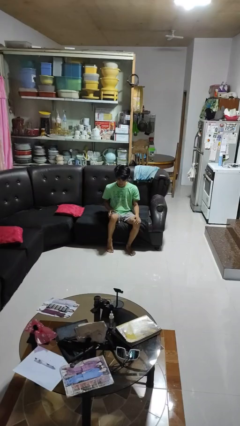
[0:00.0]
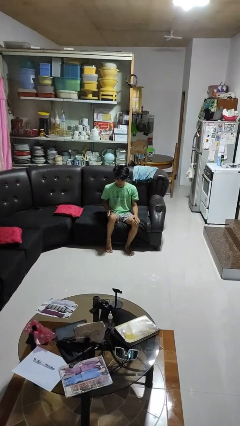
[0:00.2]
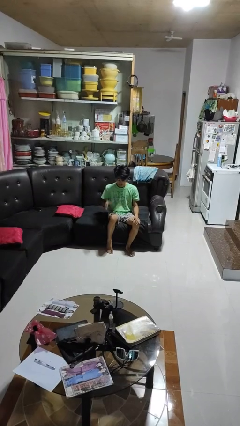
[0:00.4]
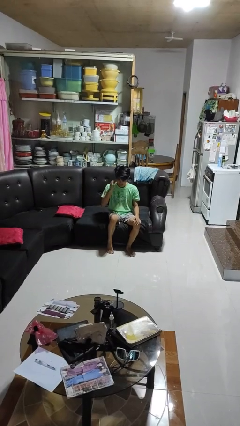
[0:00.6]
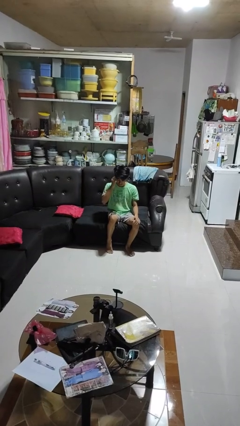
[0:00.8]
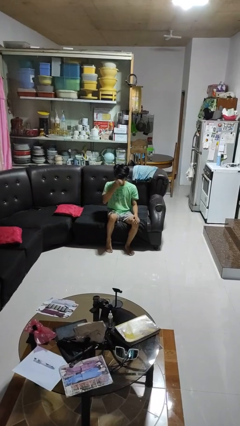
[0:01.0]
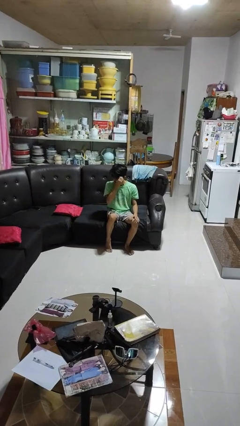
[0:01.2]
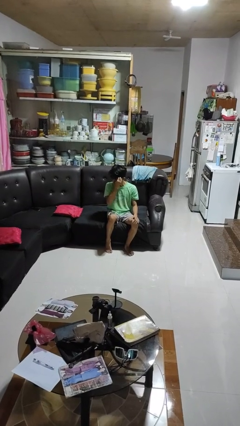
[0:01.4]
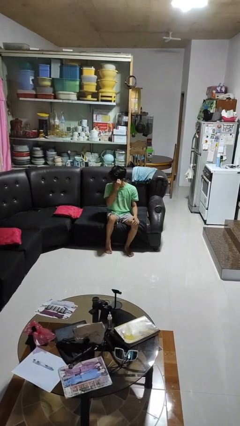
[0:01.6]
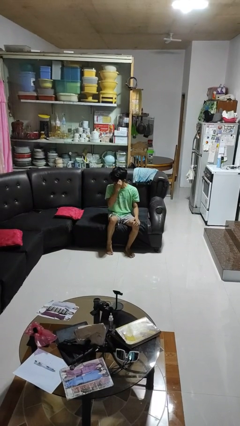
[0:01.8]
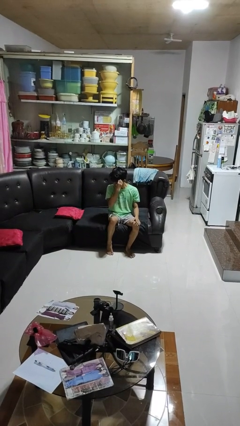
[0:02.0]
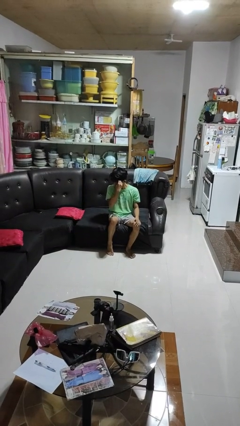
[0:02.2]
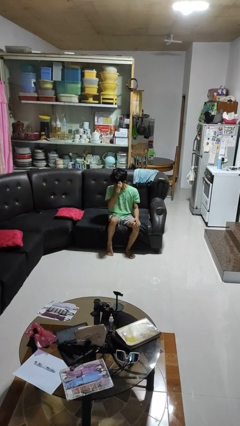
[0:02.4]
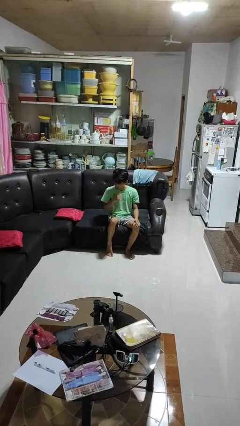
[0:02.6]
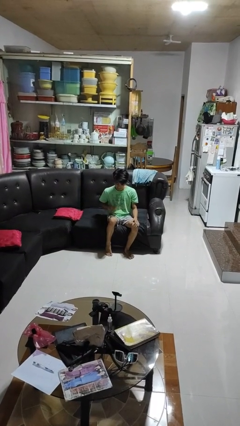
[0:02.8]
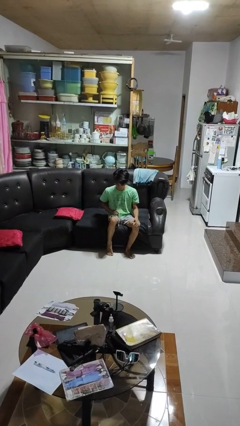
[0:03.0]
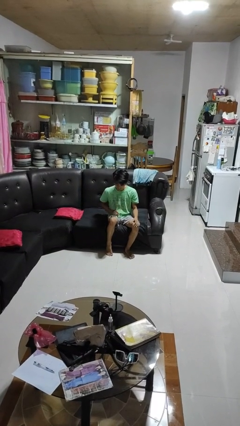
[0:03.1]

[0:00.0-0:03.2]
person scratches face

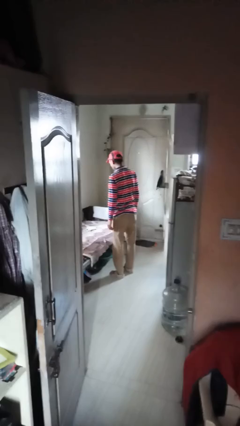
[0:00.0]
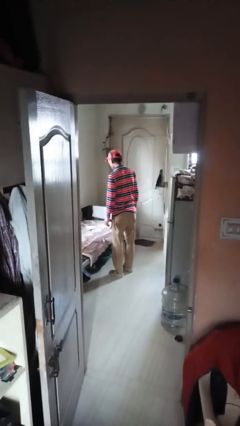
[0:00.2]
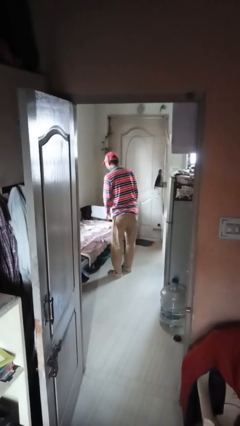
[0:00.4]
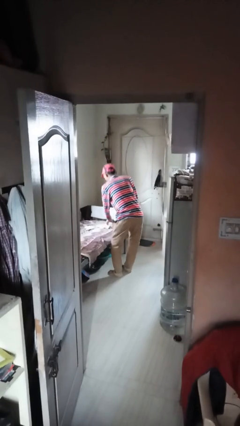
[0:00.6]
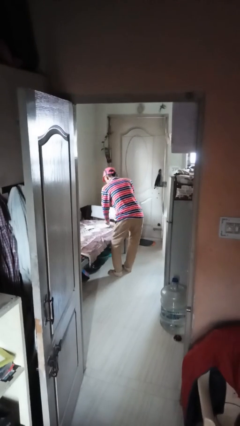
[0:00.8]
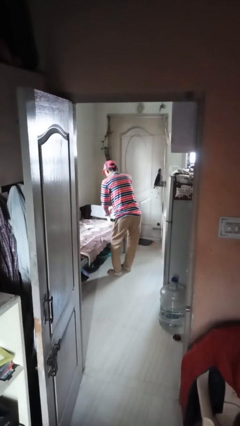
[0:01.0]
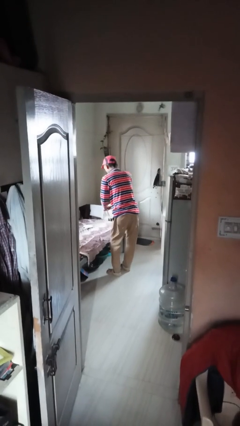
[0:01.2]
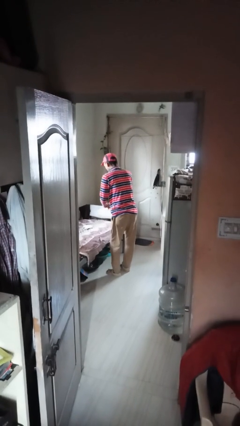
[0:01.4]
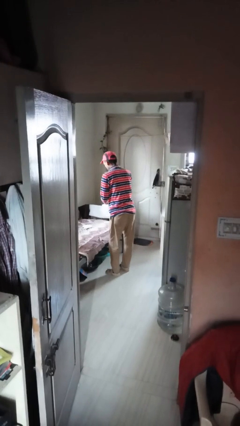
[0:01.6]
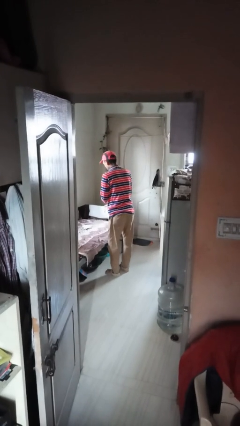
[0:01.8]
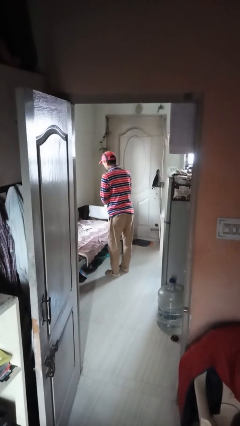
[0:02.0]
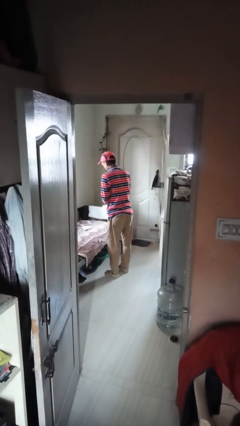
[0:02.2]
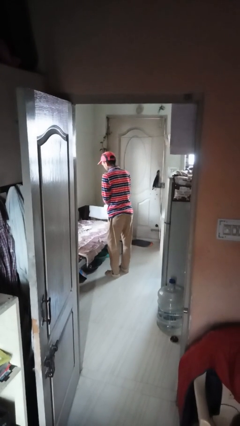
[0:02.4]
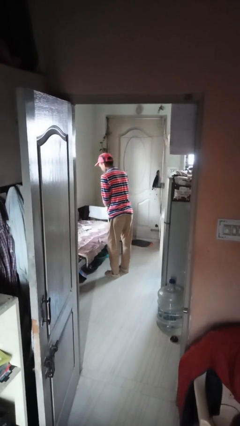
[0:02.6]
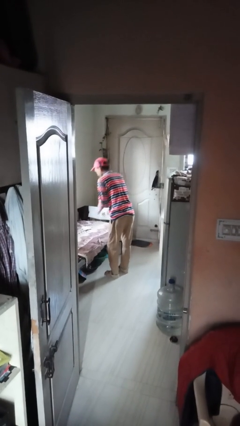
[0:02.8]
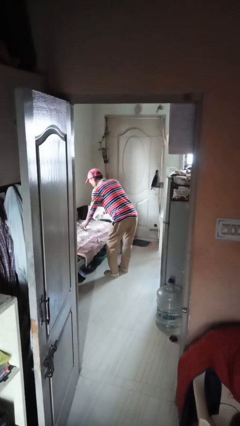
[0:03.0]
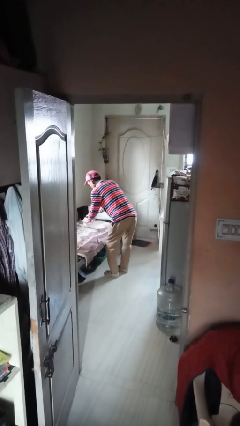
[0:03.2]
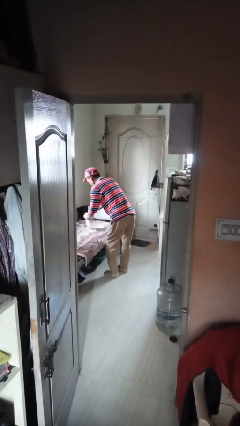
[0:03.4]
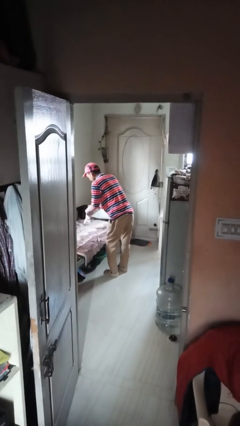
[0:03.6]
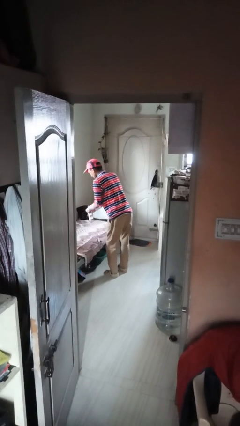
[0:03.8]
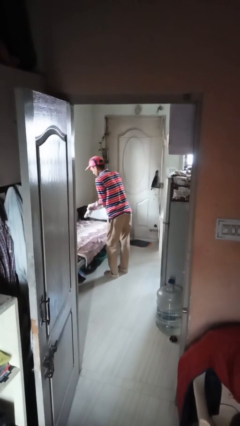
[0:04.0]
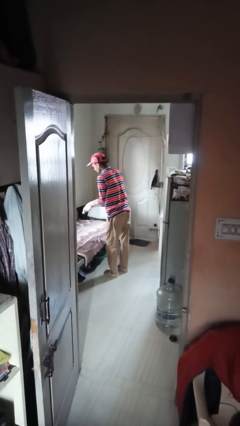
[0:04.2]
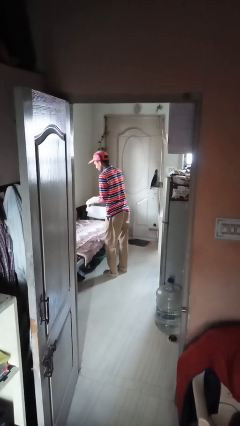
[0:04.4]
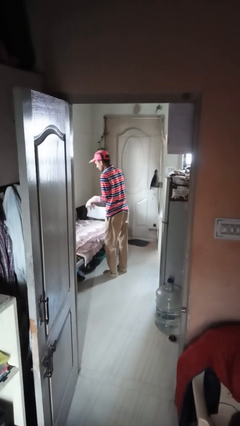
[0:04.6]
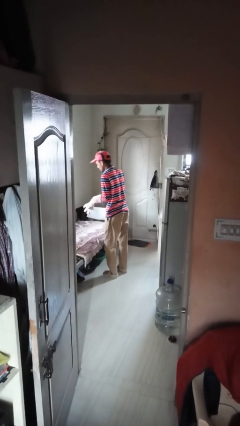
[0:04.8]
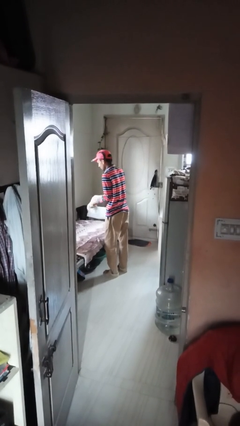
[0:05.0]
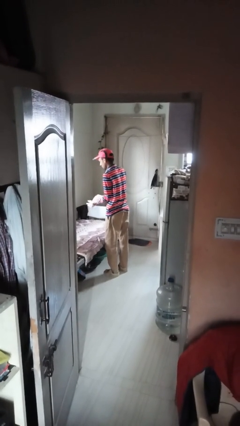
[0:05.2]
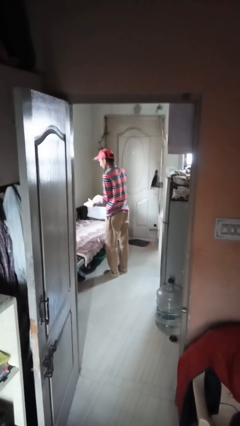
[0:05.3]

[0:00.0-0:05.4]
person puts on gloves

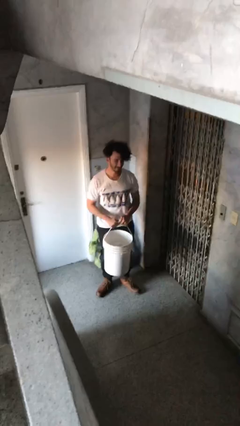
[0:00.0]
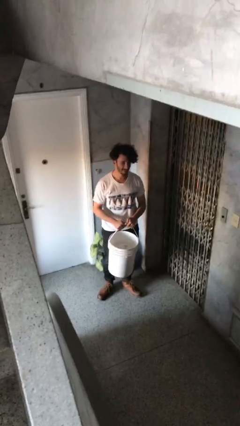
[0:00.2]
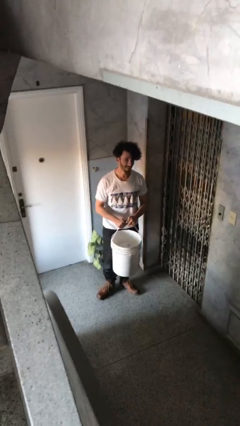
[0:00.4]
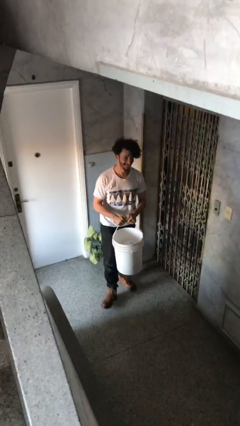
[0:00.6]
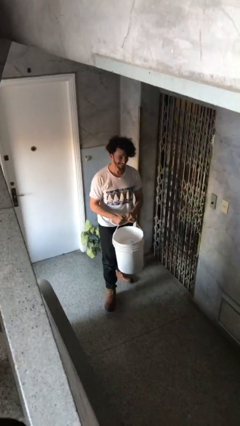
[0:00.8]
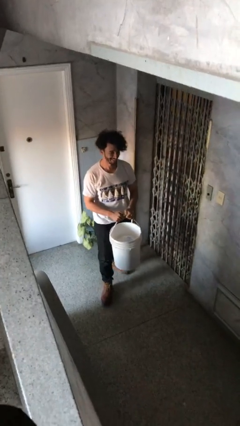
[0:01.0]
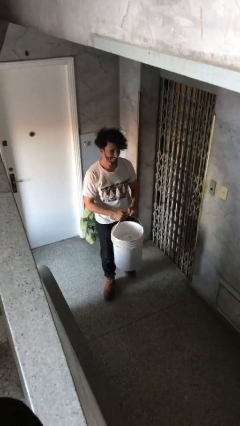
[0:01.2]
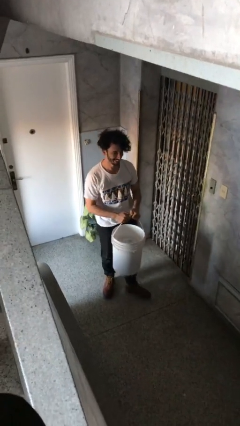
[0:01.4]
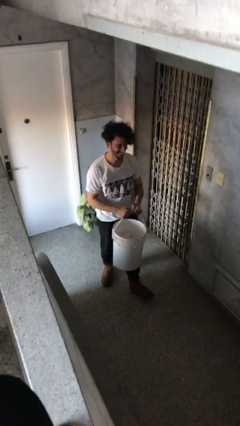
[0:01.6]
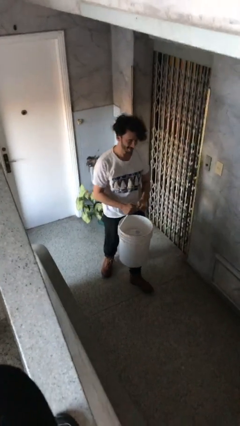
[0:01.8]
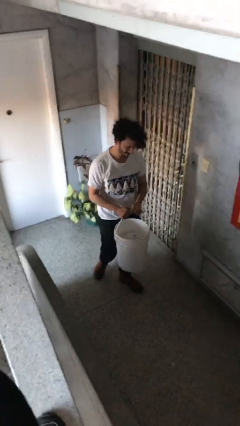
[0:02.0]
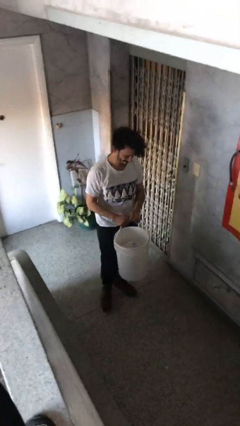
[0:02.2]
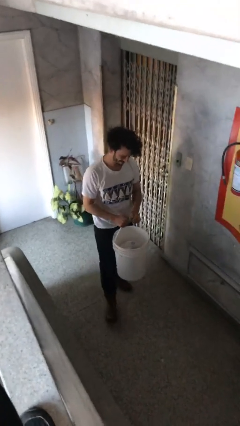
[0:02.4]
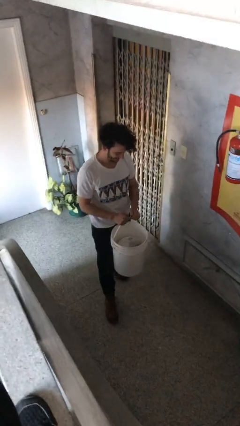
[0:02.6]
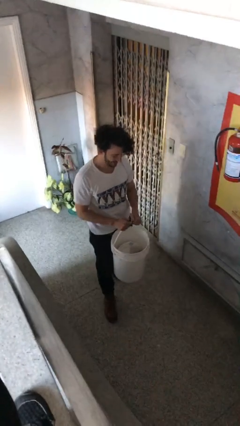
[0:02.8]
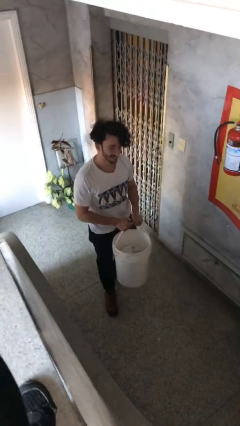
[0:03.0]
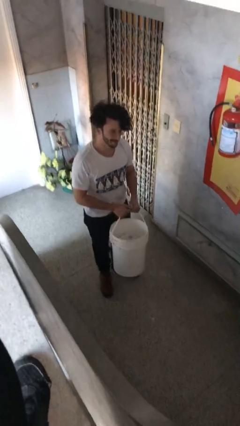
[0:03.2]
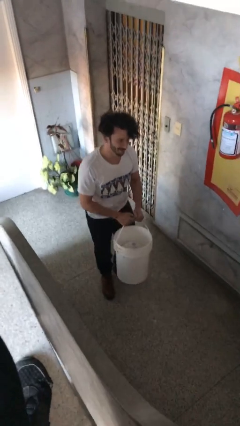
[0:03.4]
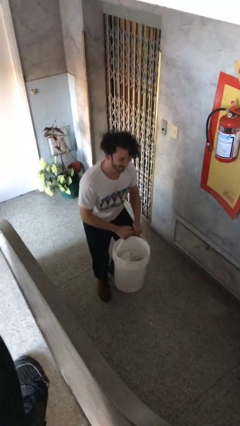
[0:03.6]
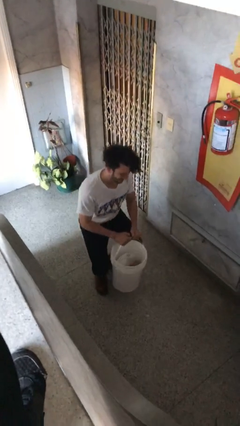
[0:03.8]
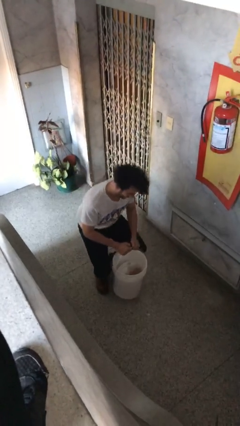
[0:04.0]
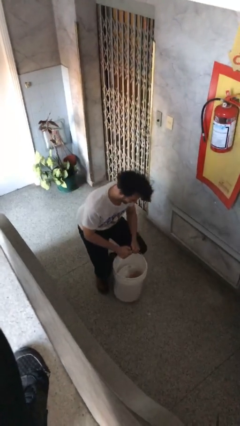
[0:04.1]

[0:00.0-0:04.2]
person carries heavy object

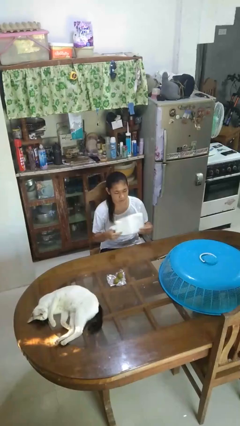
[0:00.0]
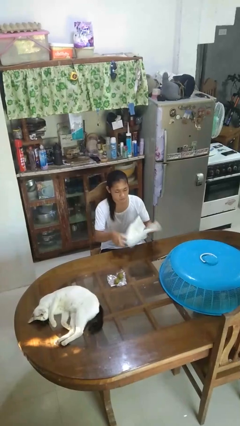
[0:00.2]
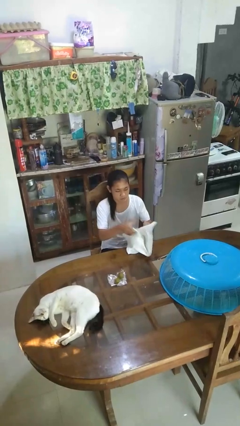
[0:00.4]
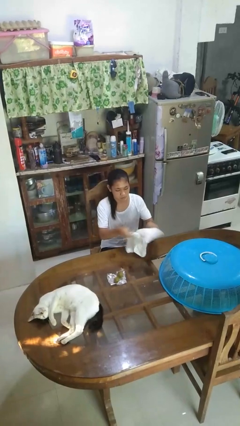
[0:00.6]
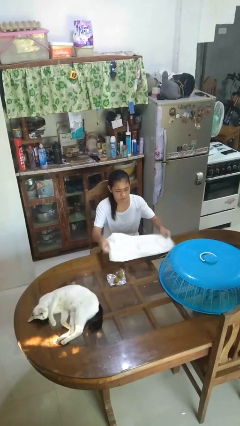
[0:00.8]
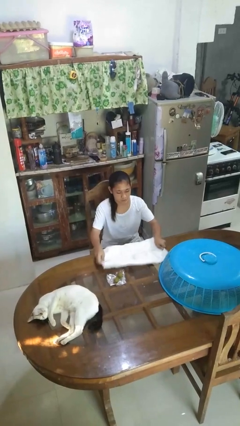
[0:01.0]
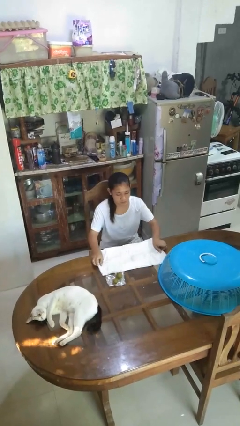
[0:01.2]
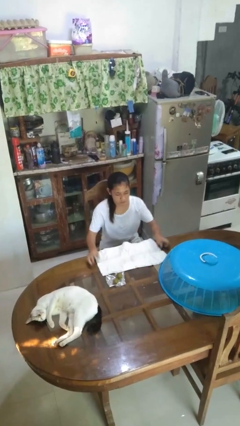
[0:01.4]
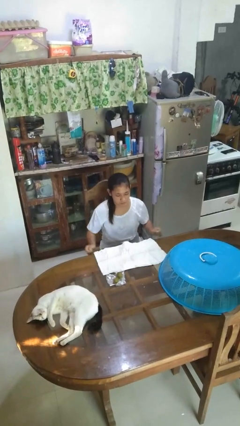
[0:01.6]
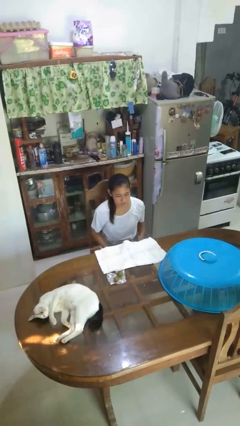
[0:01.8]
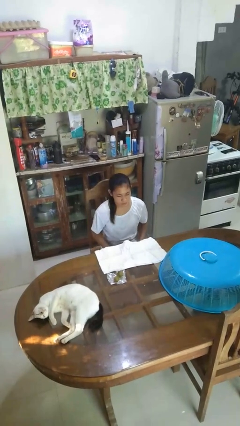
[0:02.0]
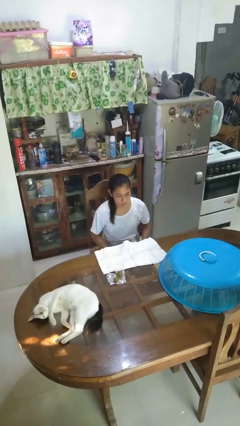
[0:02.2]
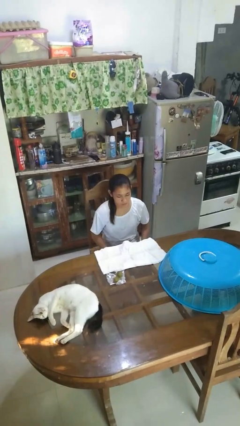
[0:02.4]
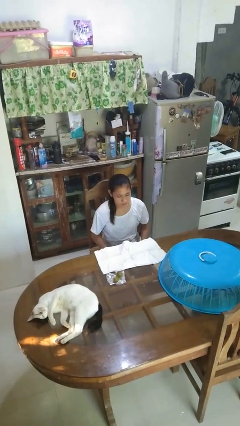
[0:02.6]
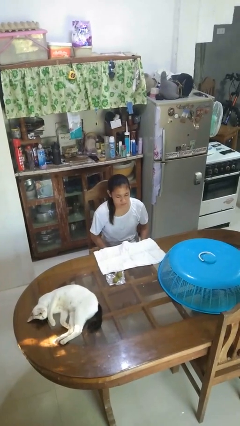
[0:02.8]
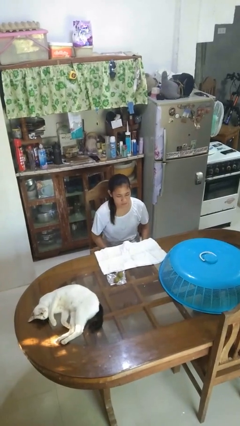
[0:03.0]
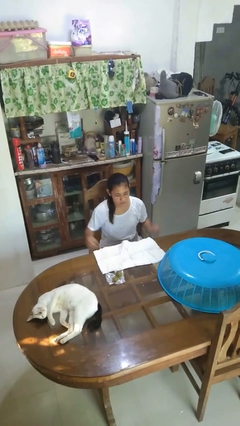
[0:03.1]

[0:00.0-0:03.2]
person spreads tablecloth

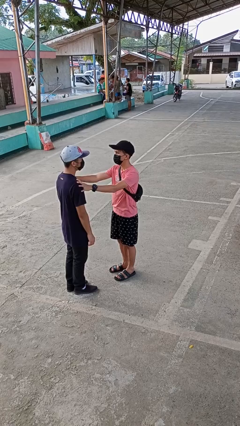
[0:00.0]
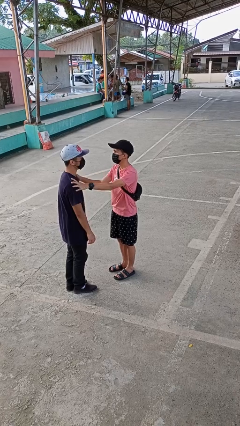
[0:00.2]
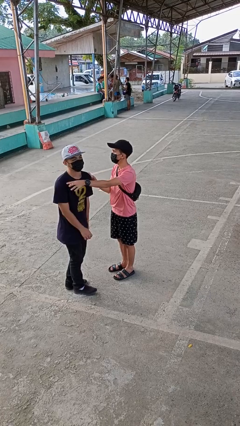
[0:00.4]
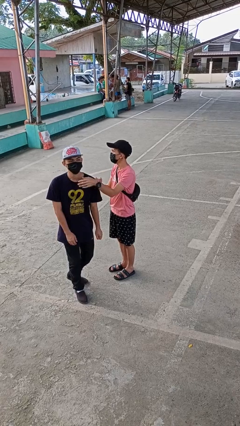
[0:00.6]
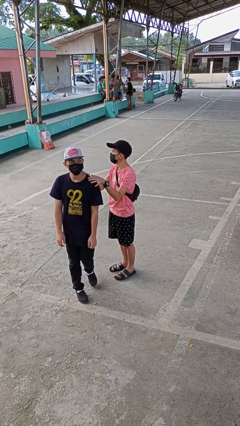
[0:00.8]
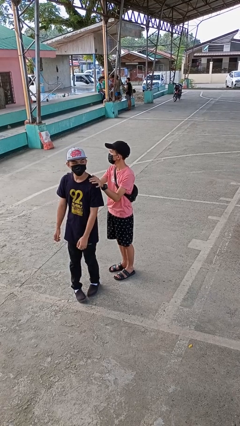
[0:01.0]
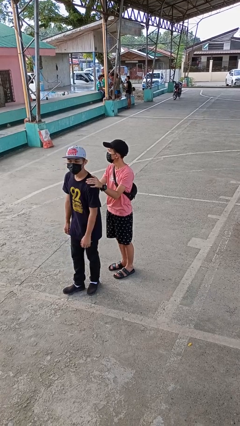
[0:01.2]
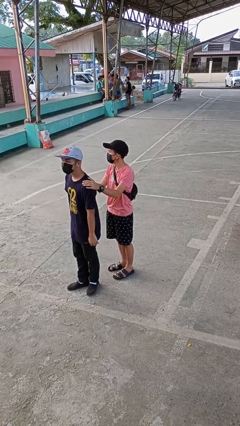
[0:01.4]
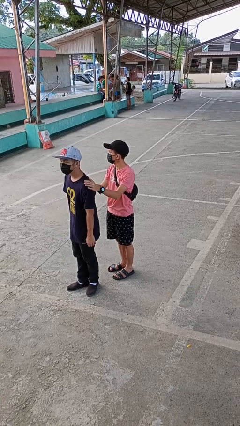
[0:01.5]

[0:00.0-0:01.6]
person spins person around

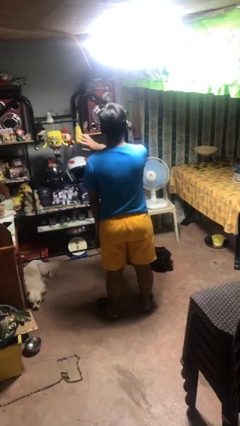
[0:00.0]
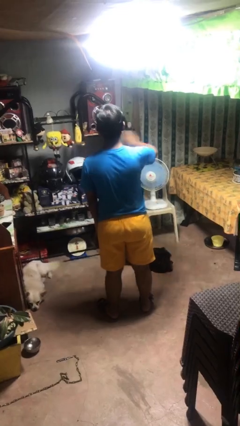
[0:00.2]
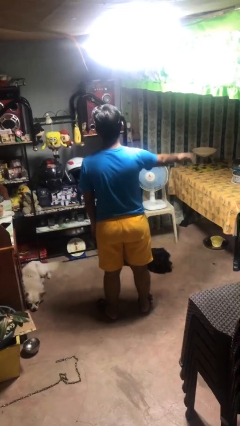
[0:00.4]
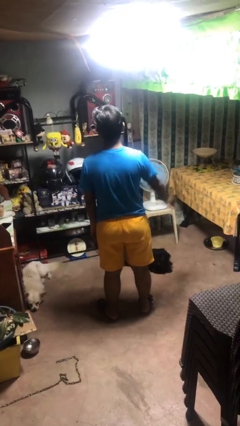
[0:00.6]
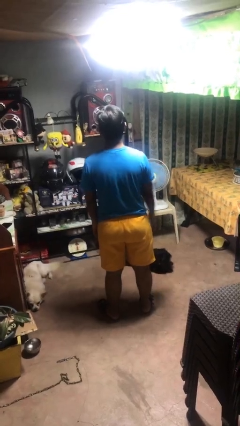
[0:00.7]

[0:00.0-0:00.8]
person gestures swipe right
